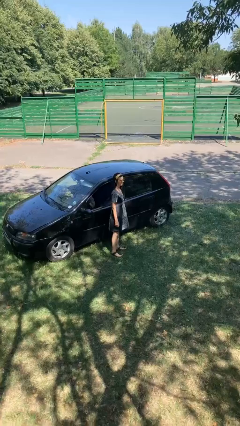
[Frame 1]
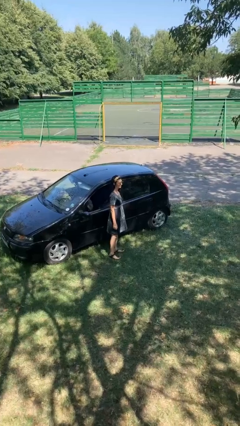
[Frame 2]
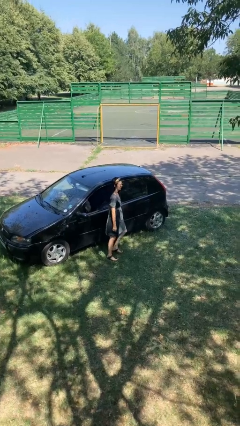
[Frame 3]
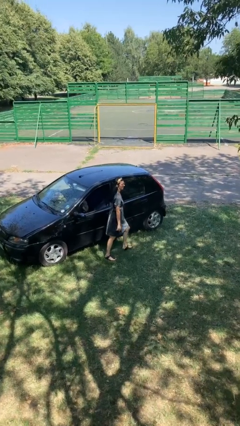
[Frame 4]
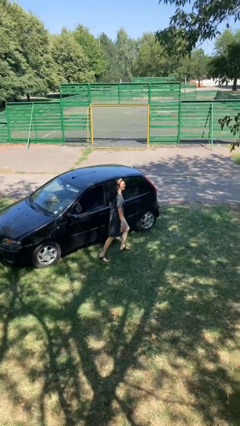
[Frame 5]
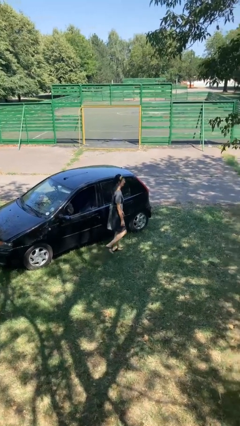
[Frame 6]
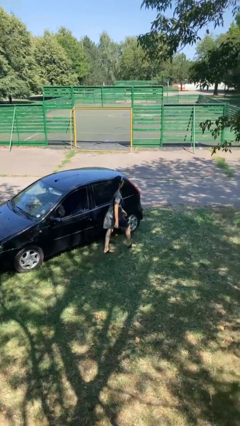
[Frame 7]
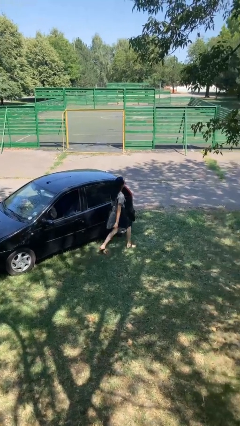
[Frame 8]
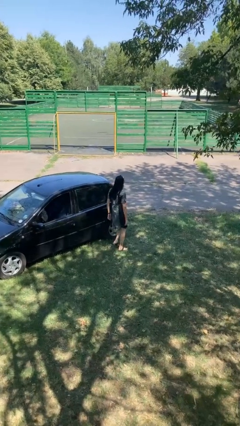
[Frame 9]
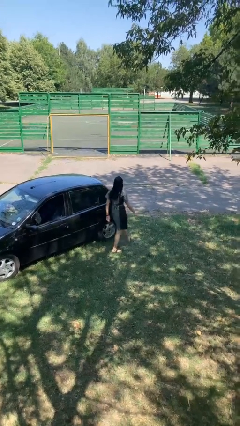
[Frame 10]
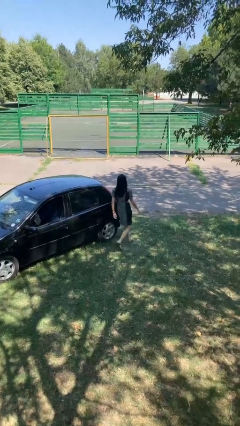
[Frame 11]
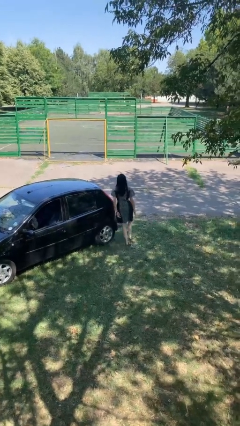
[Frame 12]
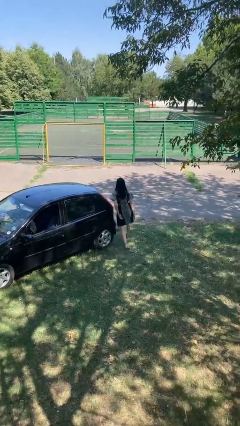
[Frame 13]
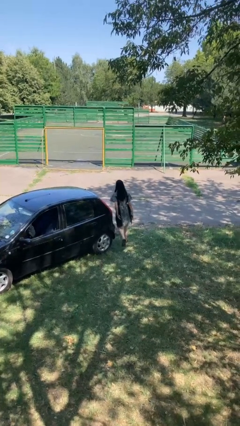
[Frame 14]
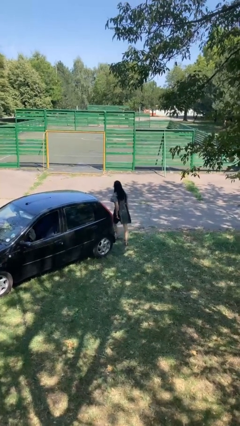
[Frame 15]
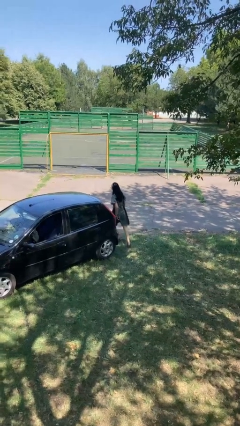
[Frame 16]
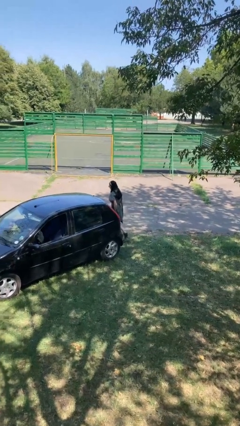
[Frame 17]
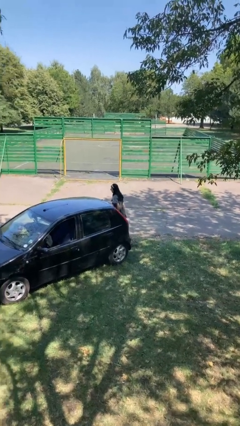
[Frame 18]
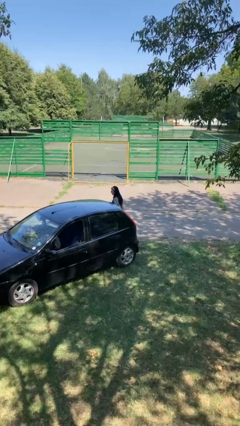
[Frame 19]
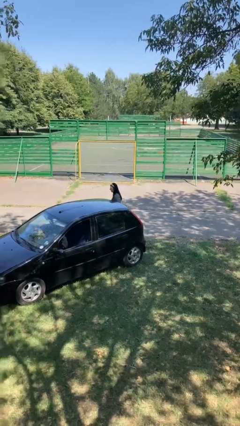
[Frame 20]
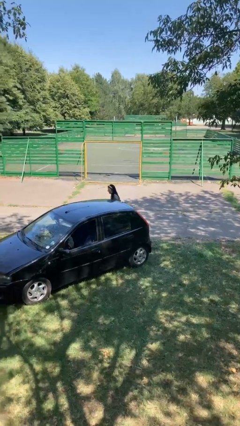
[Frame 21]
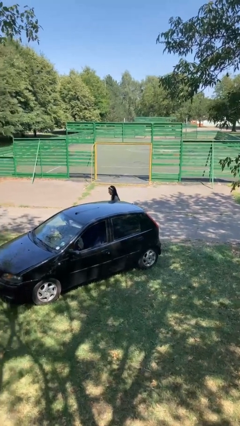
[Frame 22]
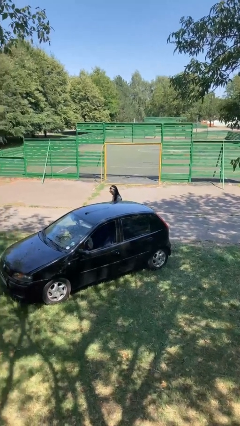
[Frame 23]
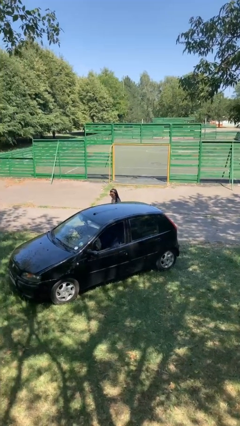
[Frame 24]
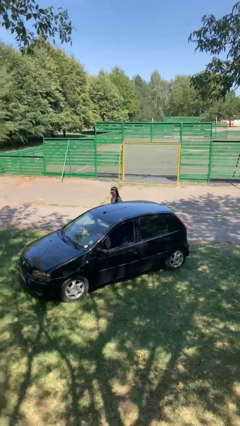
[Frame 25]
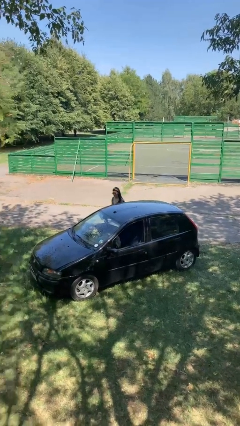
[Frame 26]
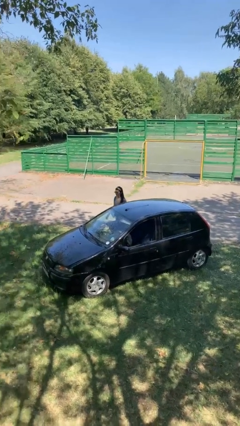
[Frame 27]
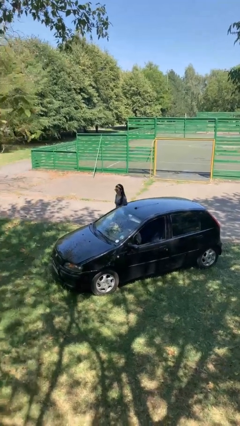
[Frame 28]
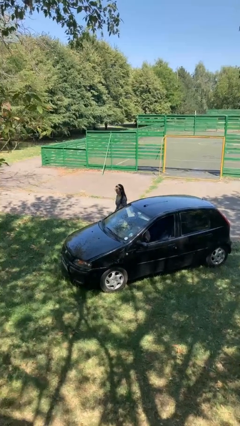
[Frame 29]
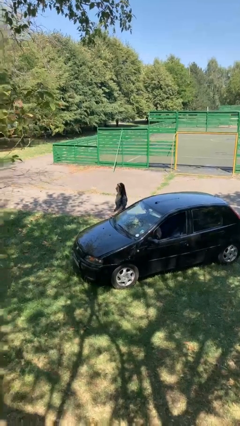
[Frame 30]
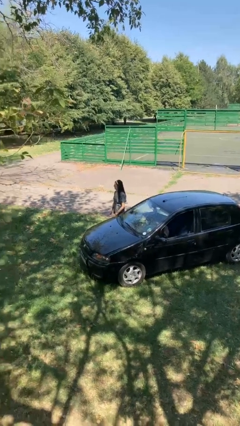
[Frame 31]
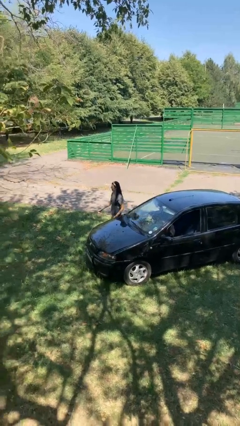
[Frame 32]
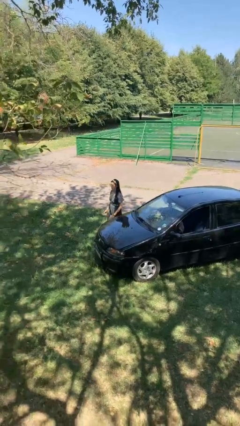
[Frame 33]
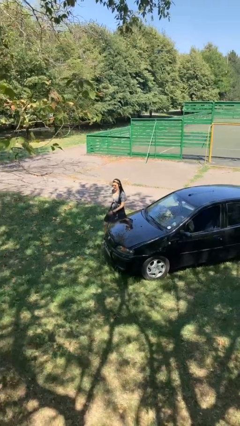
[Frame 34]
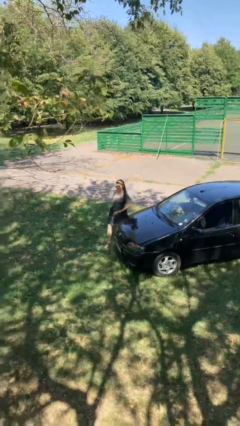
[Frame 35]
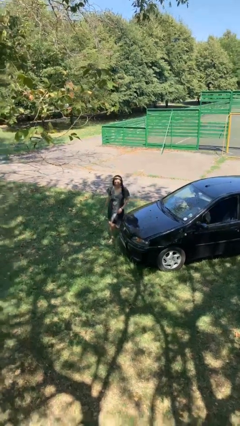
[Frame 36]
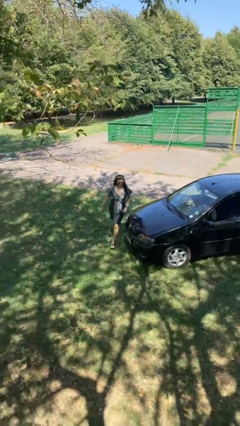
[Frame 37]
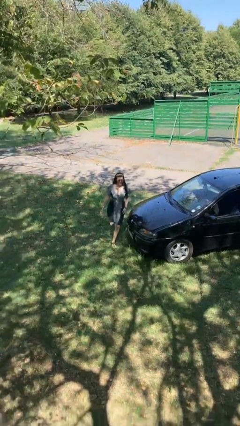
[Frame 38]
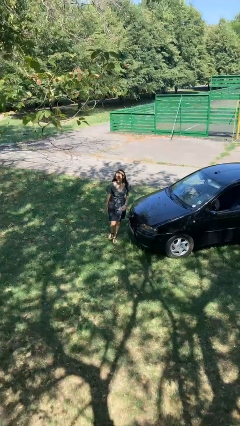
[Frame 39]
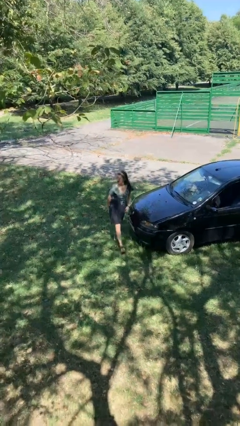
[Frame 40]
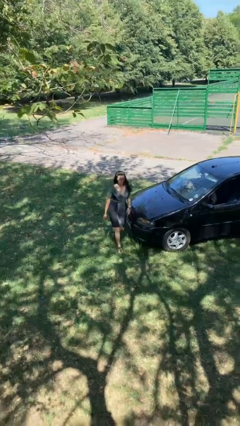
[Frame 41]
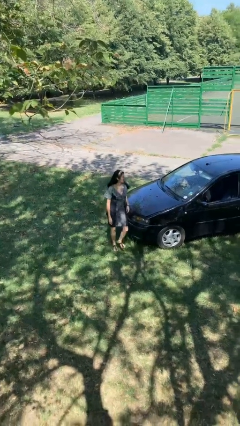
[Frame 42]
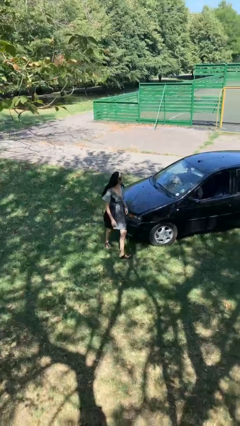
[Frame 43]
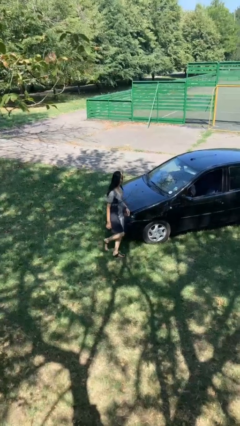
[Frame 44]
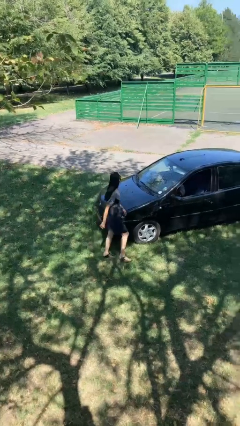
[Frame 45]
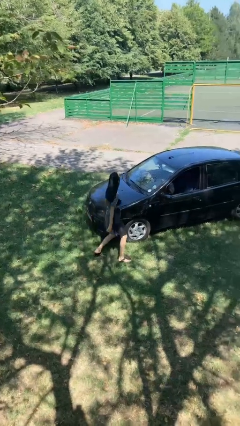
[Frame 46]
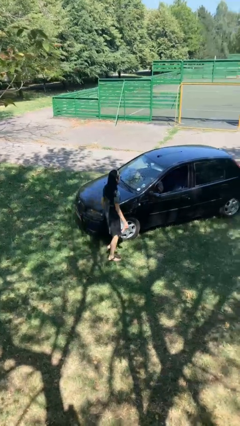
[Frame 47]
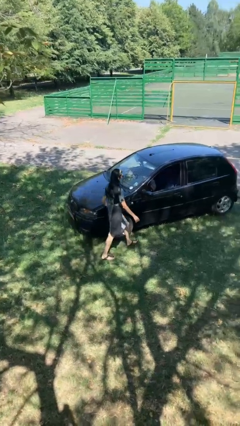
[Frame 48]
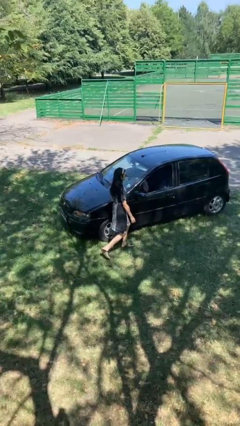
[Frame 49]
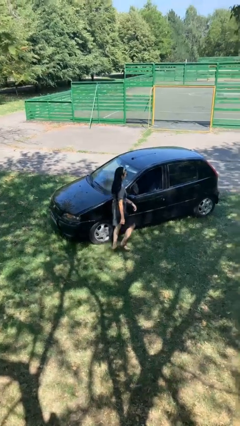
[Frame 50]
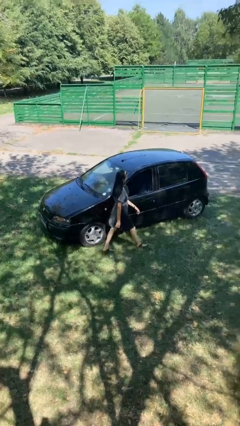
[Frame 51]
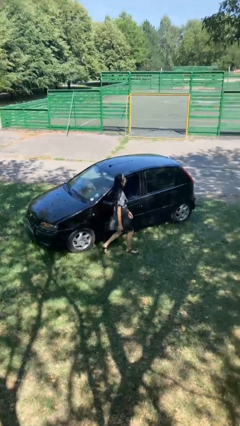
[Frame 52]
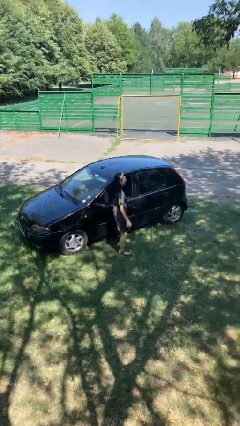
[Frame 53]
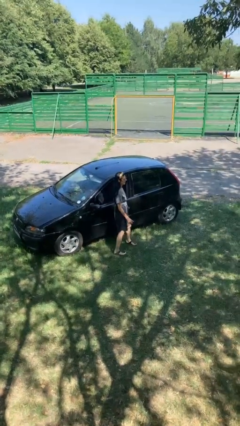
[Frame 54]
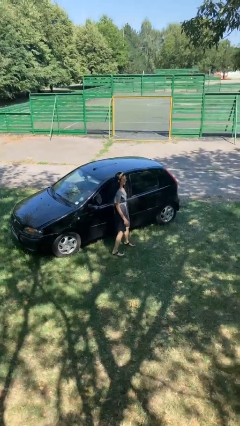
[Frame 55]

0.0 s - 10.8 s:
person walks around car

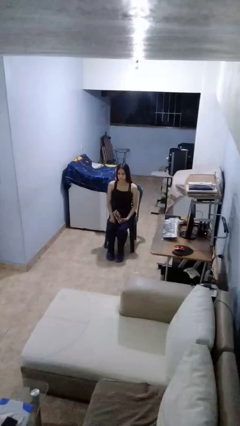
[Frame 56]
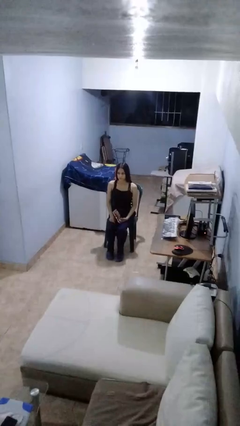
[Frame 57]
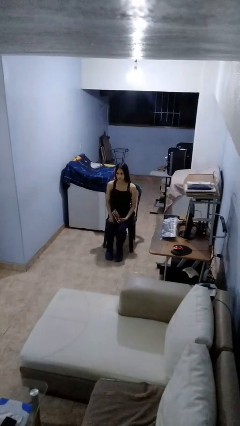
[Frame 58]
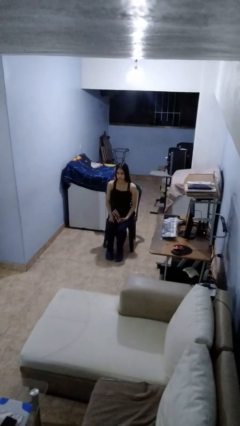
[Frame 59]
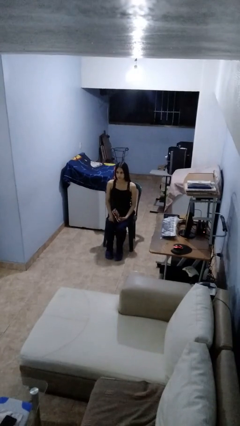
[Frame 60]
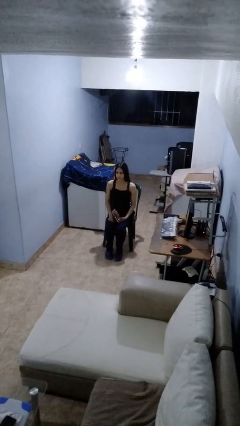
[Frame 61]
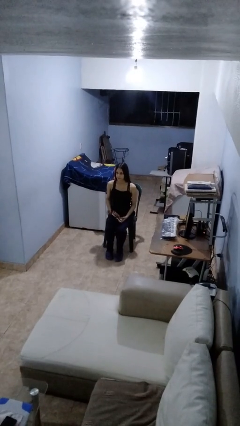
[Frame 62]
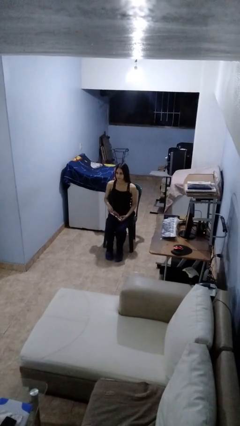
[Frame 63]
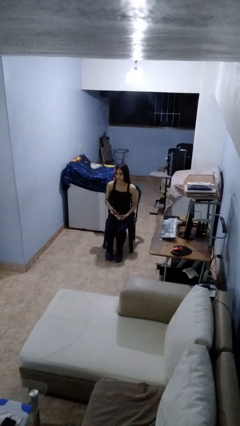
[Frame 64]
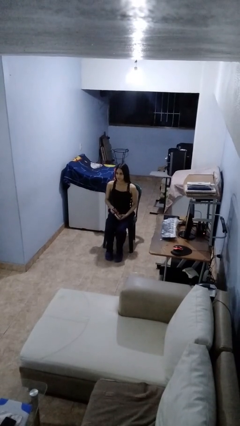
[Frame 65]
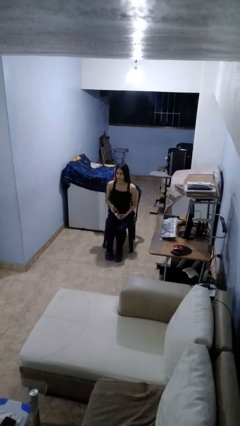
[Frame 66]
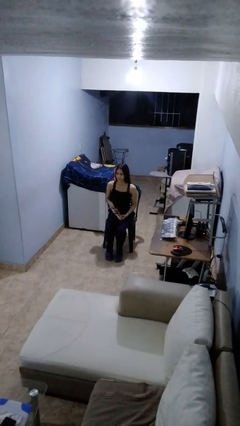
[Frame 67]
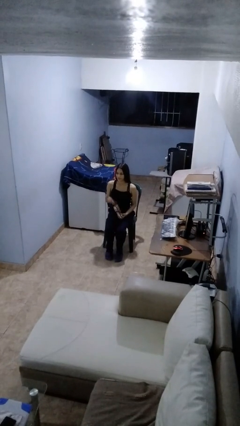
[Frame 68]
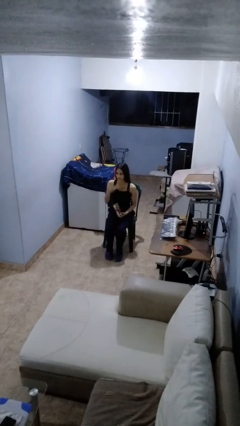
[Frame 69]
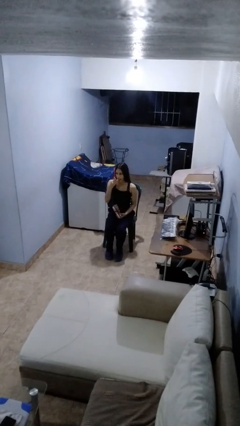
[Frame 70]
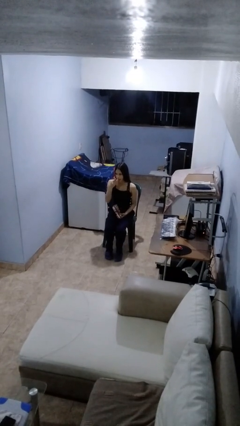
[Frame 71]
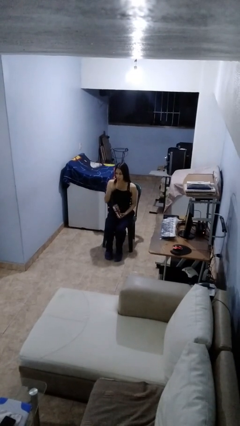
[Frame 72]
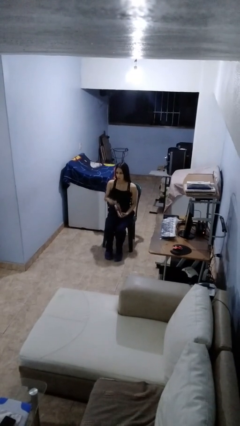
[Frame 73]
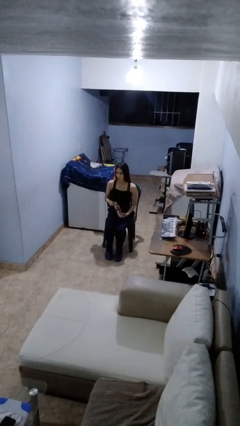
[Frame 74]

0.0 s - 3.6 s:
person eats snack from bag

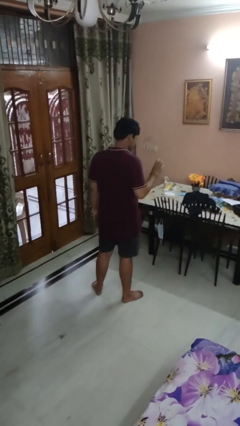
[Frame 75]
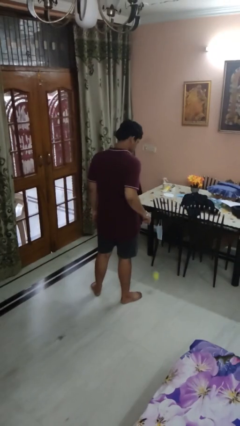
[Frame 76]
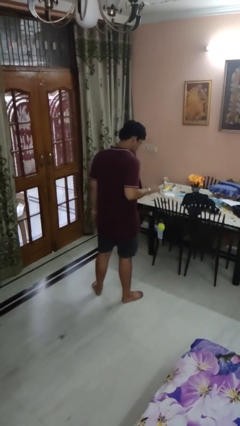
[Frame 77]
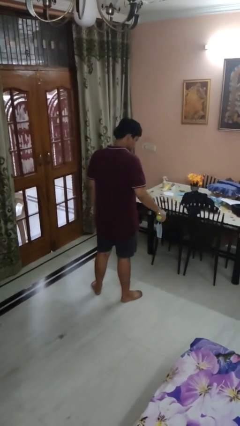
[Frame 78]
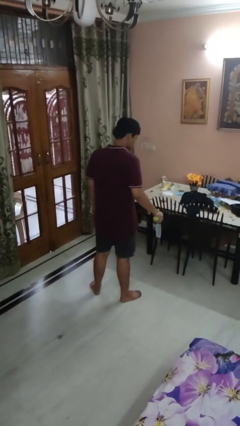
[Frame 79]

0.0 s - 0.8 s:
person bounces ball on floor

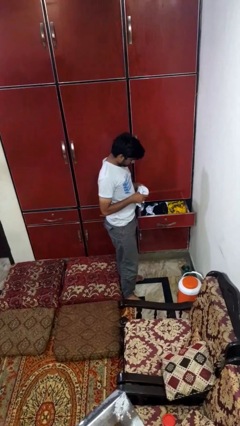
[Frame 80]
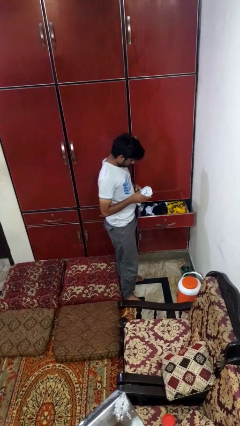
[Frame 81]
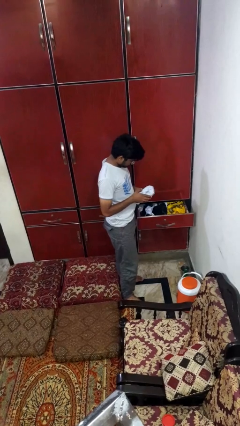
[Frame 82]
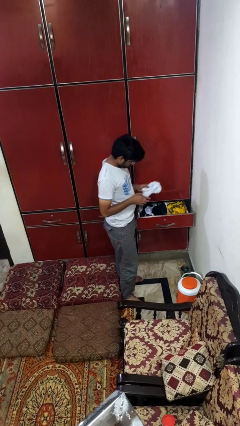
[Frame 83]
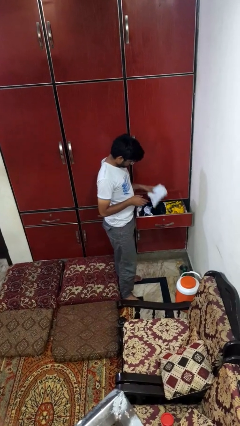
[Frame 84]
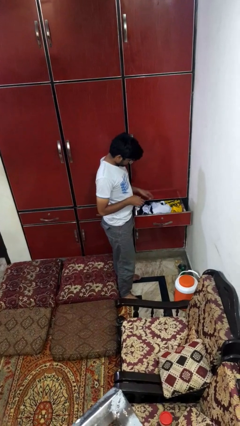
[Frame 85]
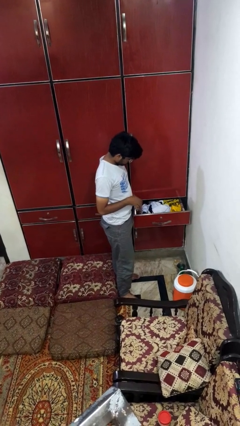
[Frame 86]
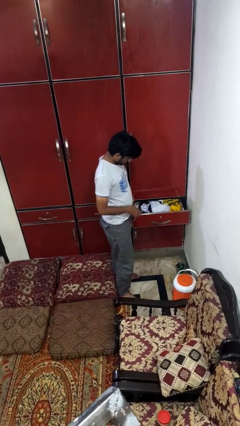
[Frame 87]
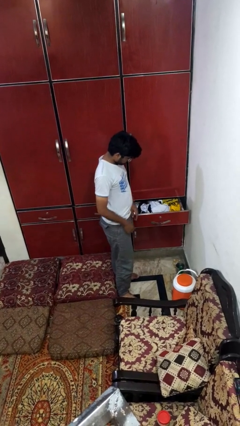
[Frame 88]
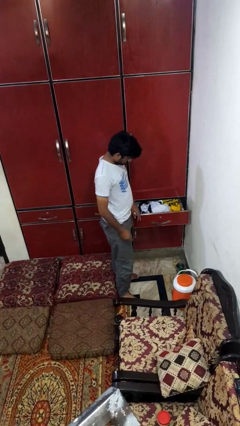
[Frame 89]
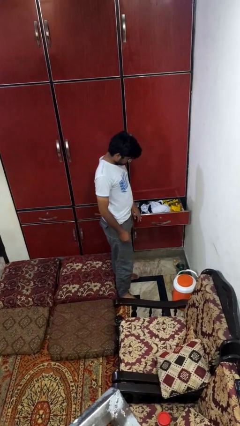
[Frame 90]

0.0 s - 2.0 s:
person puts clothes into dresser

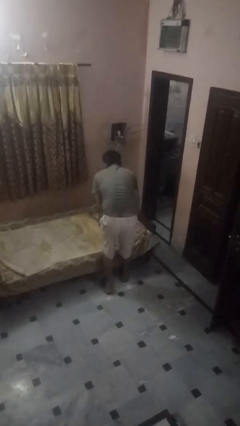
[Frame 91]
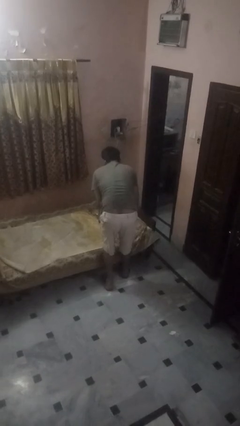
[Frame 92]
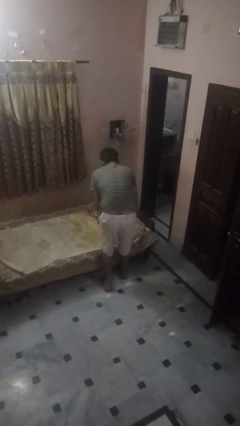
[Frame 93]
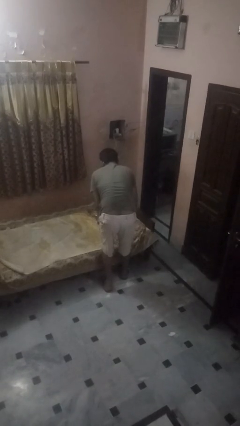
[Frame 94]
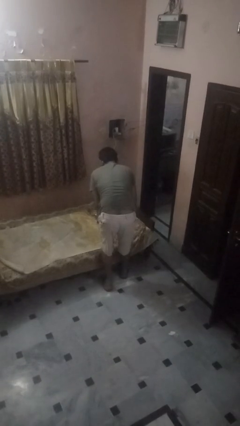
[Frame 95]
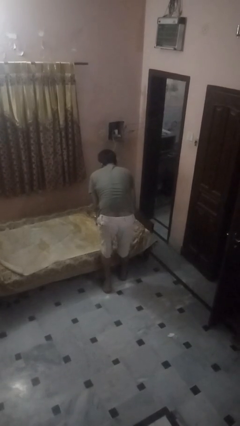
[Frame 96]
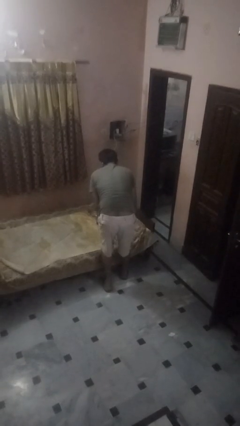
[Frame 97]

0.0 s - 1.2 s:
person makes bed
